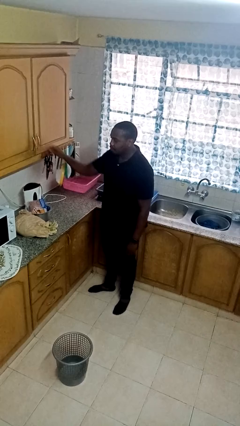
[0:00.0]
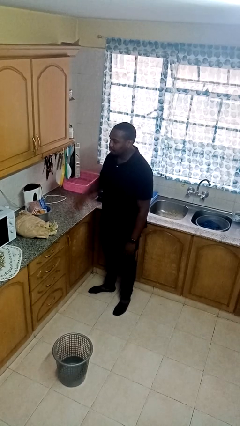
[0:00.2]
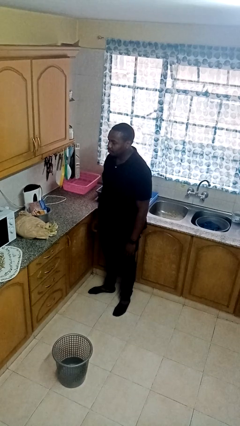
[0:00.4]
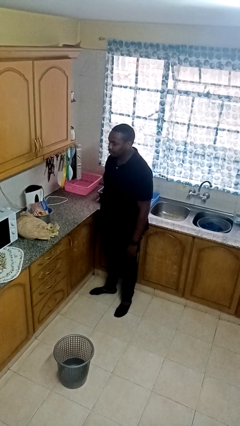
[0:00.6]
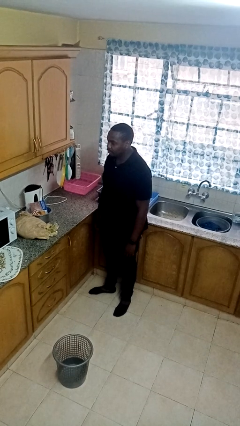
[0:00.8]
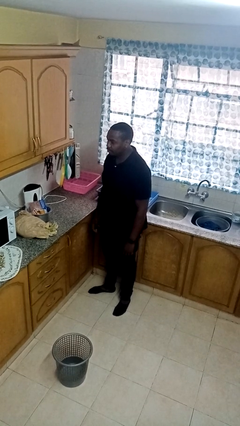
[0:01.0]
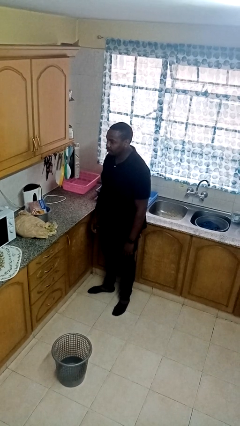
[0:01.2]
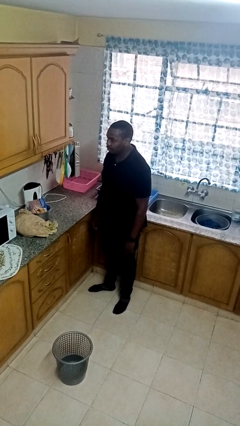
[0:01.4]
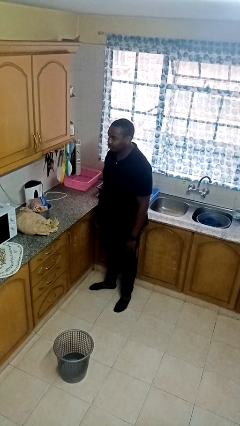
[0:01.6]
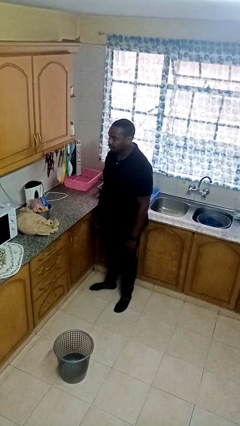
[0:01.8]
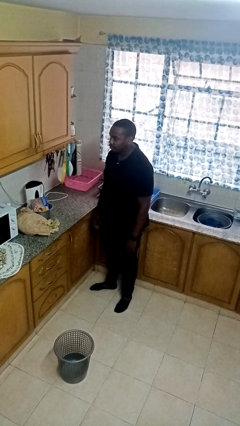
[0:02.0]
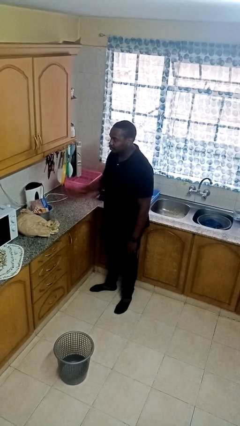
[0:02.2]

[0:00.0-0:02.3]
person closes cabinet

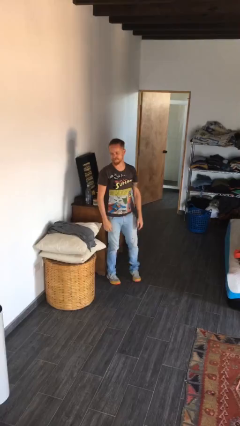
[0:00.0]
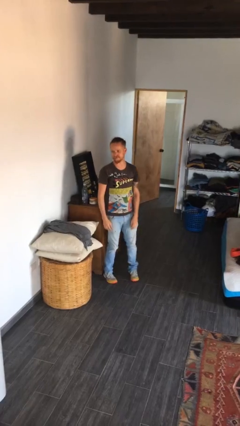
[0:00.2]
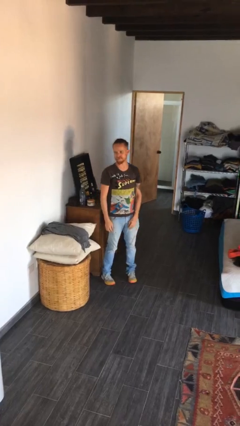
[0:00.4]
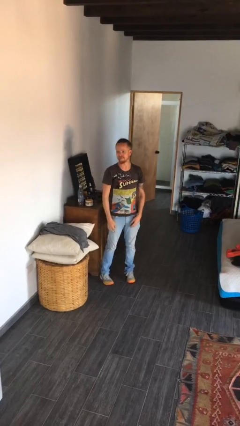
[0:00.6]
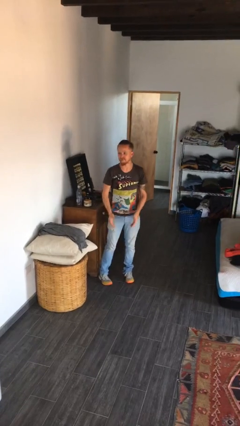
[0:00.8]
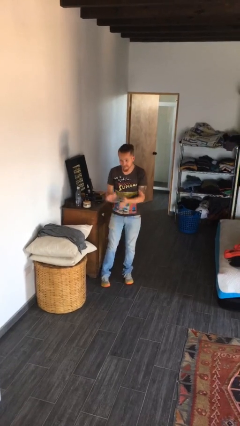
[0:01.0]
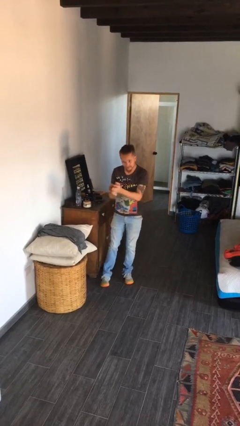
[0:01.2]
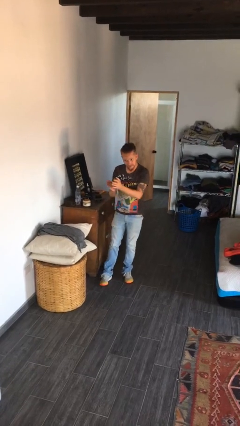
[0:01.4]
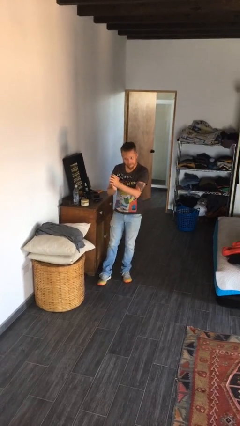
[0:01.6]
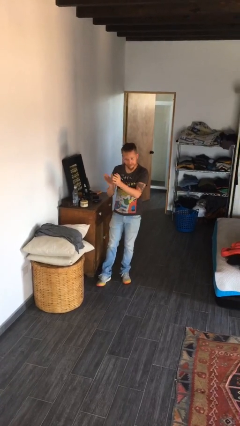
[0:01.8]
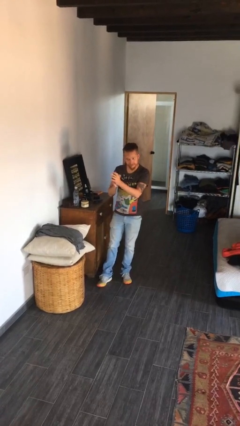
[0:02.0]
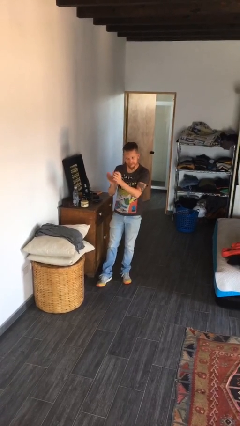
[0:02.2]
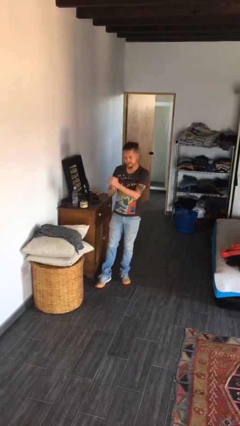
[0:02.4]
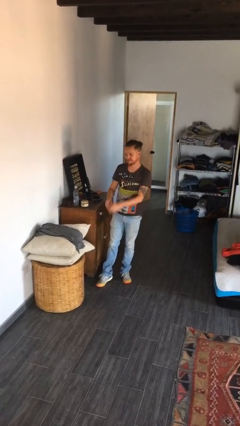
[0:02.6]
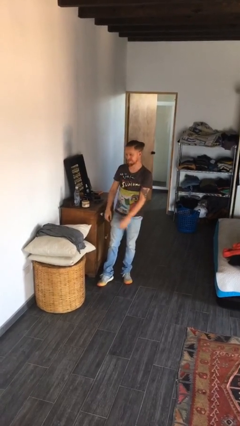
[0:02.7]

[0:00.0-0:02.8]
person claps hands

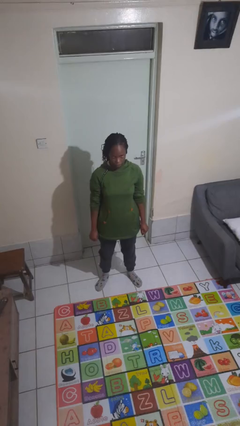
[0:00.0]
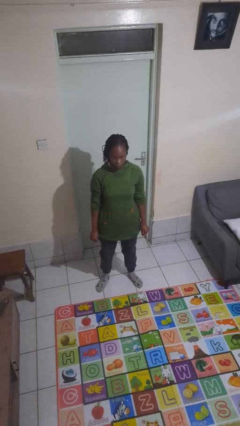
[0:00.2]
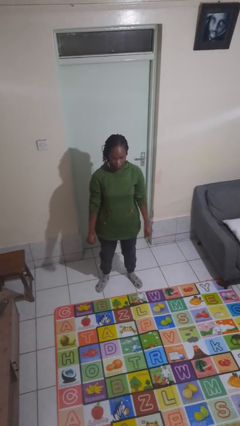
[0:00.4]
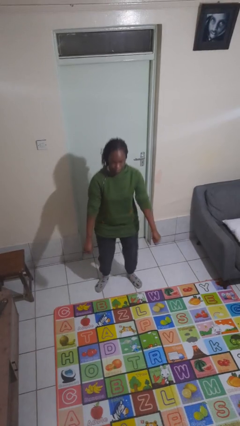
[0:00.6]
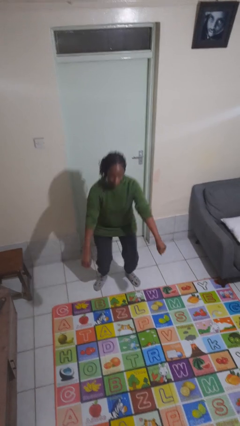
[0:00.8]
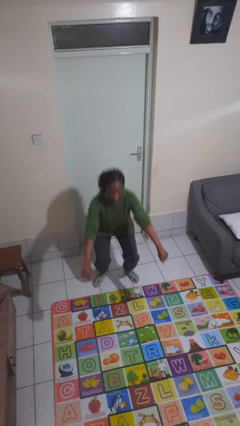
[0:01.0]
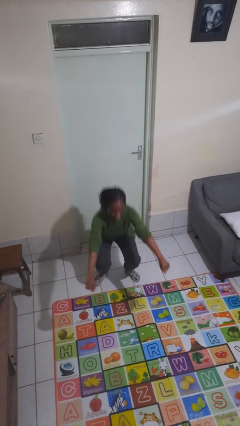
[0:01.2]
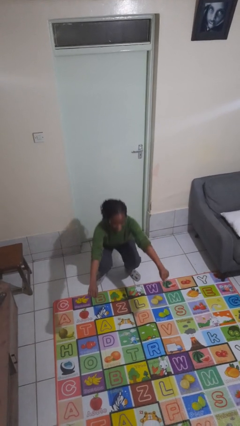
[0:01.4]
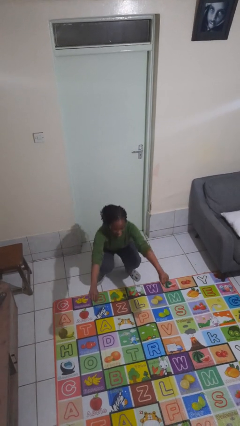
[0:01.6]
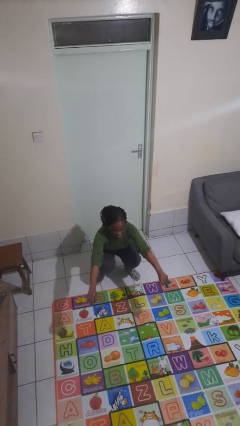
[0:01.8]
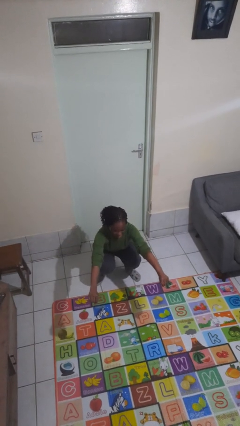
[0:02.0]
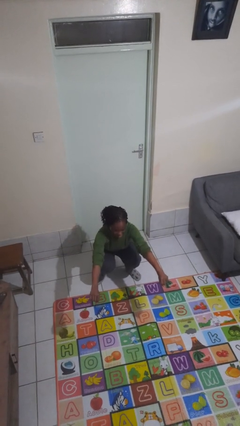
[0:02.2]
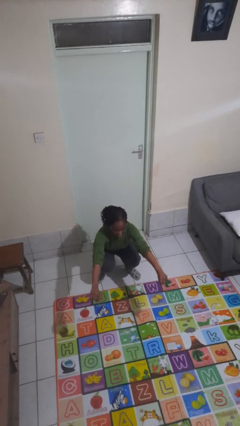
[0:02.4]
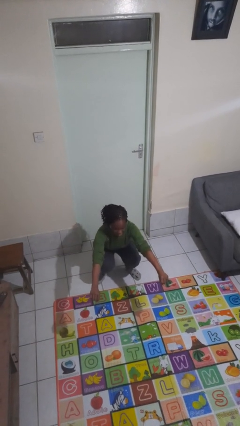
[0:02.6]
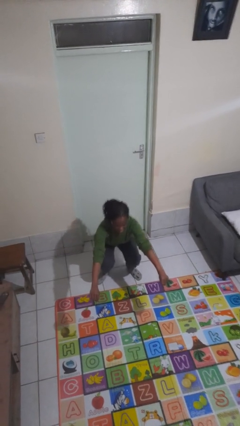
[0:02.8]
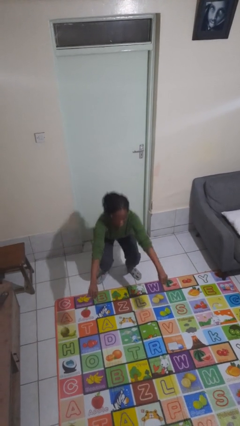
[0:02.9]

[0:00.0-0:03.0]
person squats

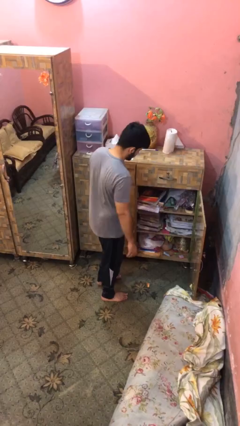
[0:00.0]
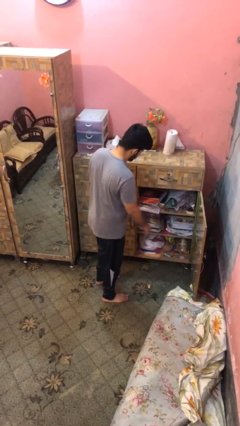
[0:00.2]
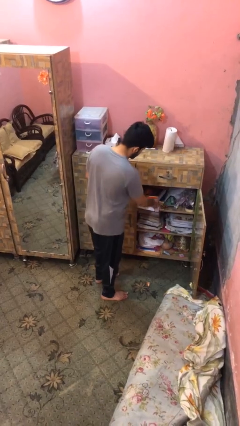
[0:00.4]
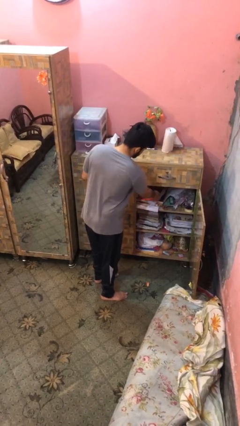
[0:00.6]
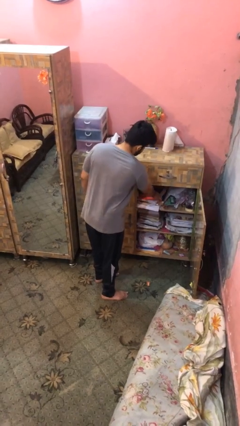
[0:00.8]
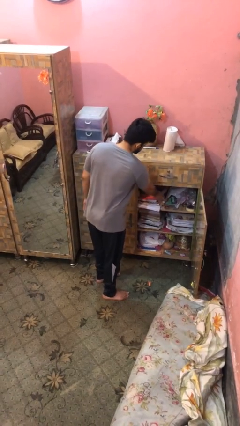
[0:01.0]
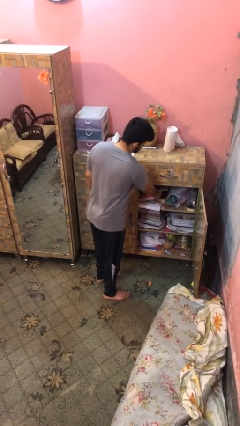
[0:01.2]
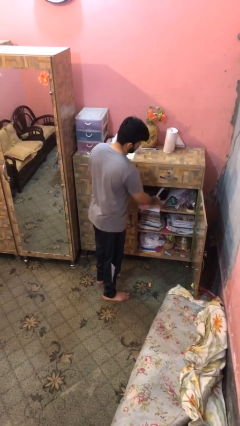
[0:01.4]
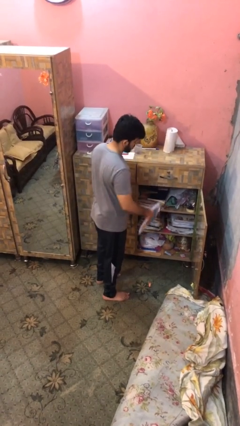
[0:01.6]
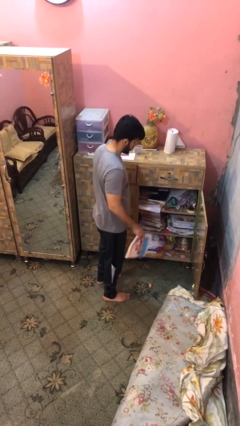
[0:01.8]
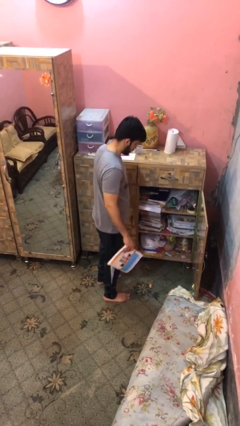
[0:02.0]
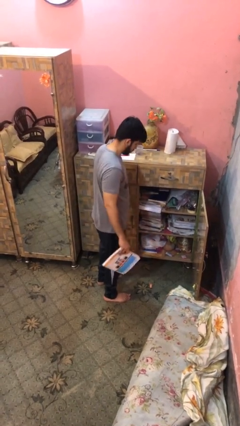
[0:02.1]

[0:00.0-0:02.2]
person picks up object from cabinet

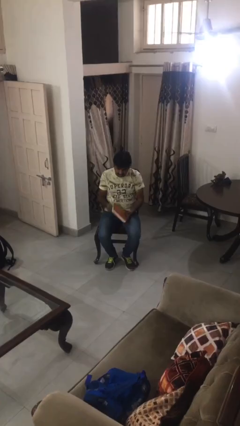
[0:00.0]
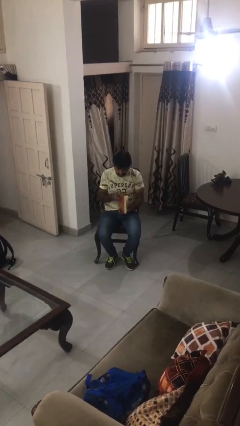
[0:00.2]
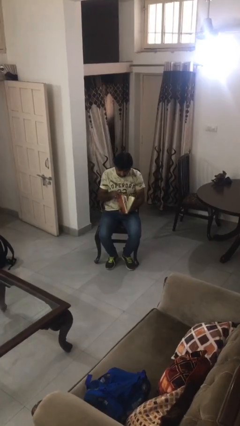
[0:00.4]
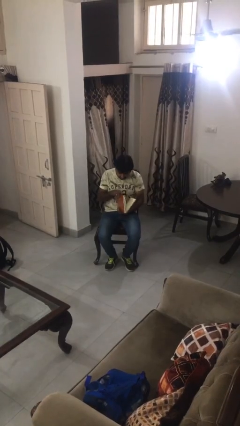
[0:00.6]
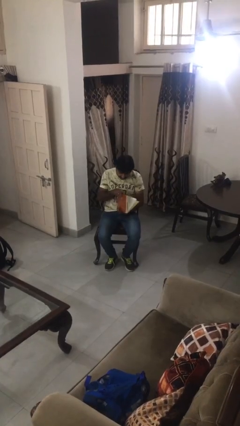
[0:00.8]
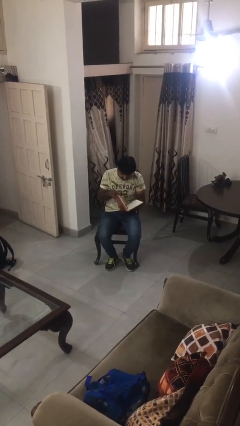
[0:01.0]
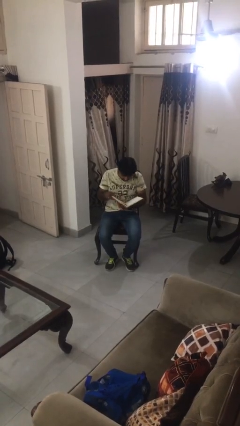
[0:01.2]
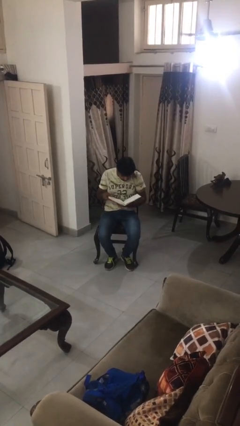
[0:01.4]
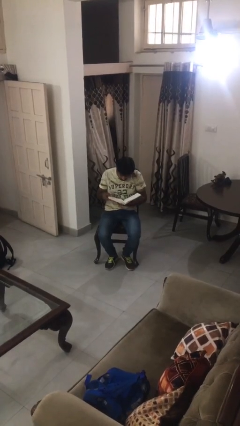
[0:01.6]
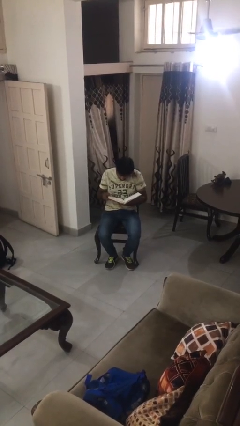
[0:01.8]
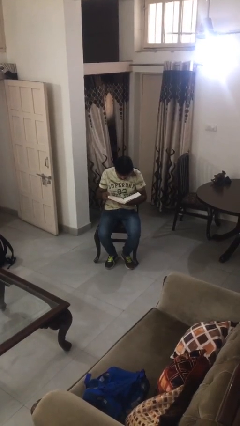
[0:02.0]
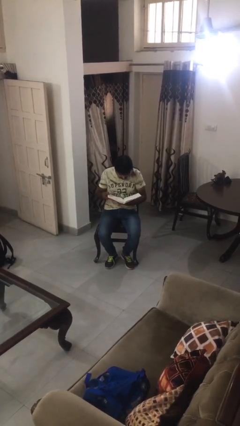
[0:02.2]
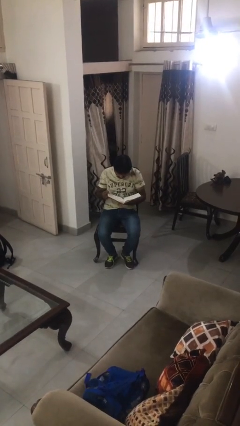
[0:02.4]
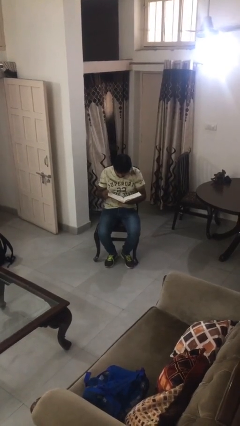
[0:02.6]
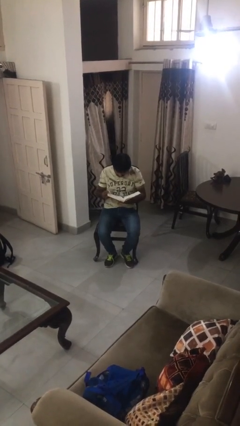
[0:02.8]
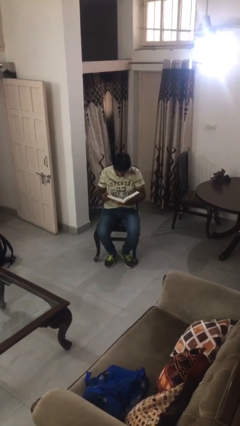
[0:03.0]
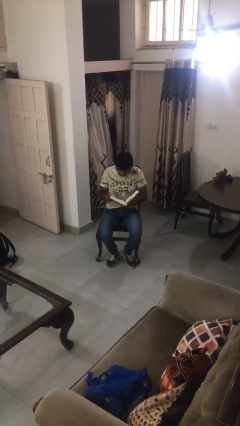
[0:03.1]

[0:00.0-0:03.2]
person reads book

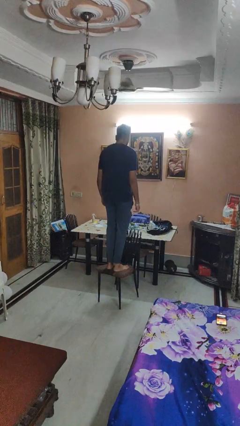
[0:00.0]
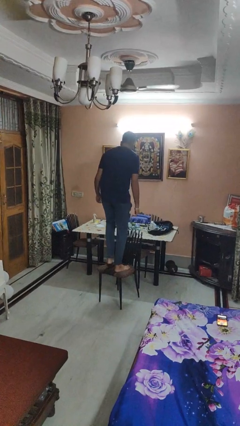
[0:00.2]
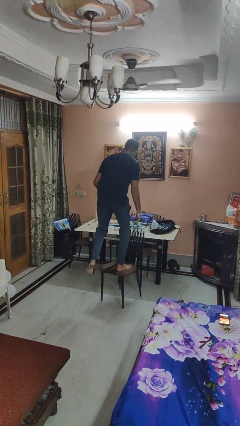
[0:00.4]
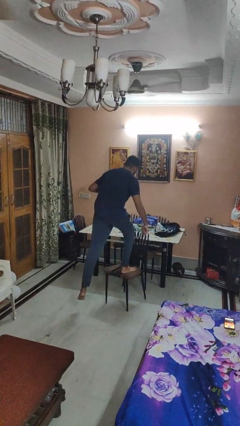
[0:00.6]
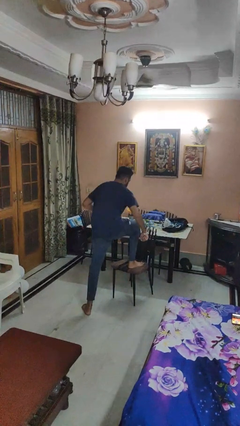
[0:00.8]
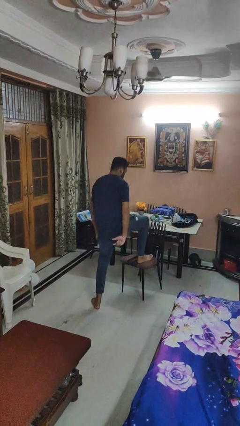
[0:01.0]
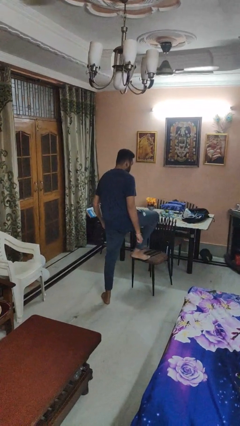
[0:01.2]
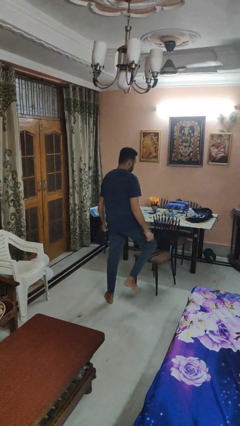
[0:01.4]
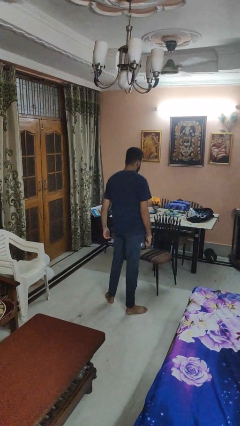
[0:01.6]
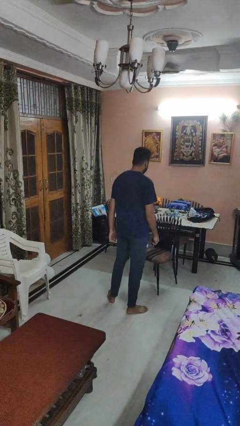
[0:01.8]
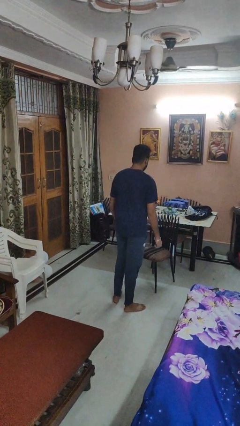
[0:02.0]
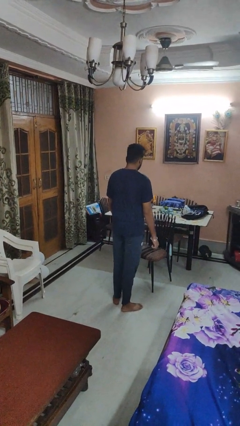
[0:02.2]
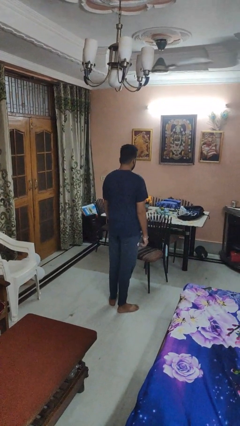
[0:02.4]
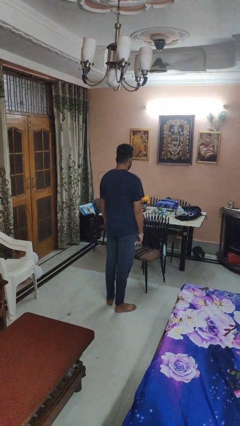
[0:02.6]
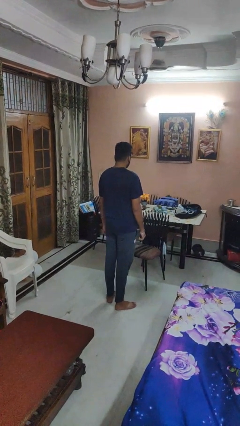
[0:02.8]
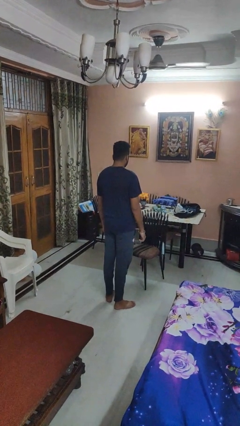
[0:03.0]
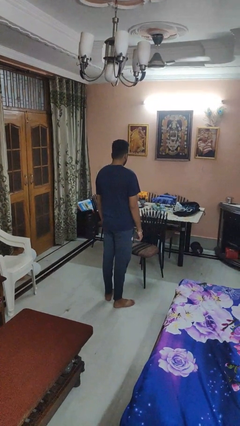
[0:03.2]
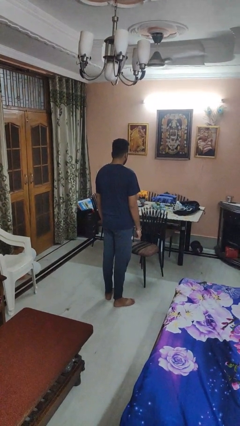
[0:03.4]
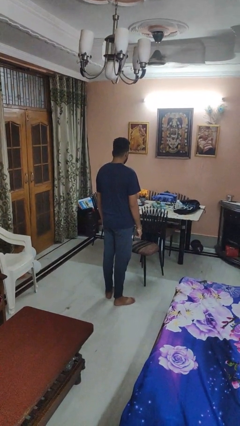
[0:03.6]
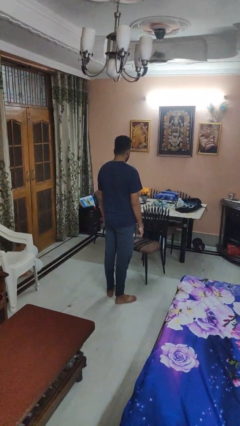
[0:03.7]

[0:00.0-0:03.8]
person climbs off chair
